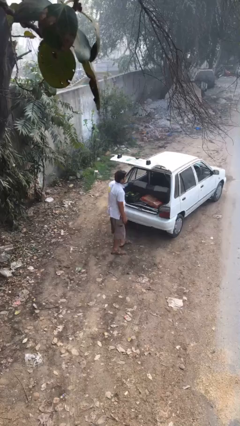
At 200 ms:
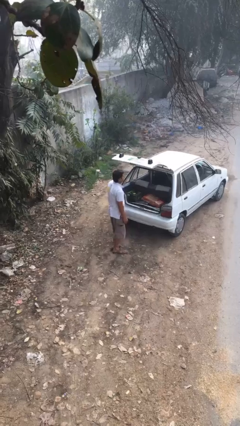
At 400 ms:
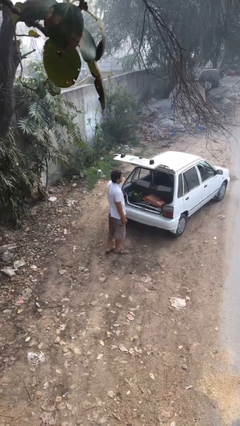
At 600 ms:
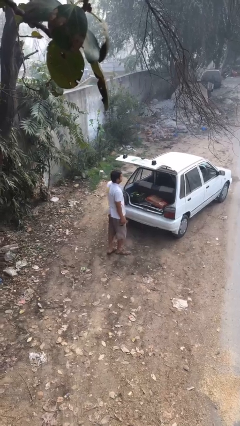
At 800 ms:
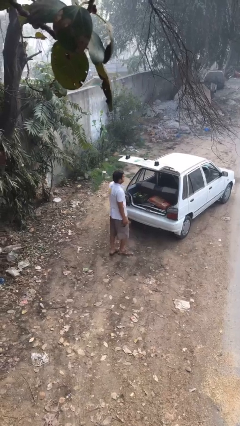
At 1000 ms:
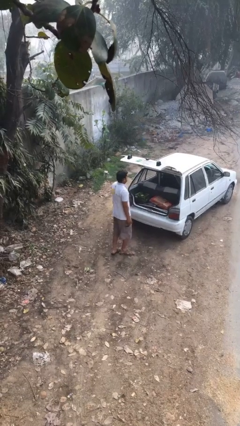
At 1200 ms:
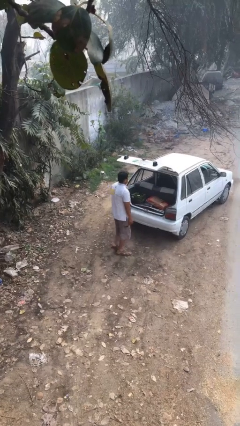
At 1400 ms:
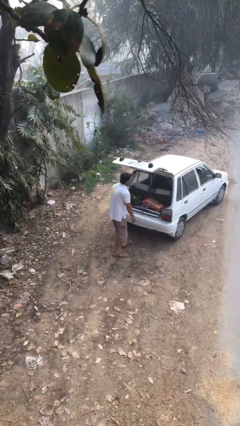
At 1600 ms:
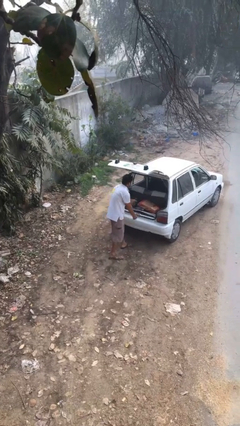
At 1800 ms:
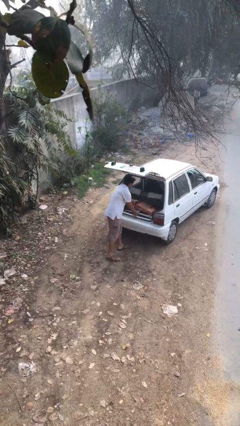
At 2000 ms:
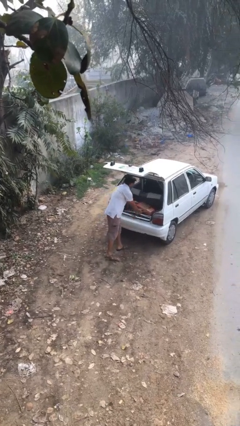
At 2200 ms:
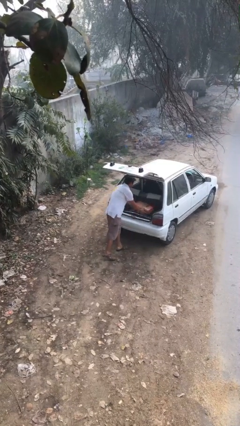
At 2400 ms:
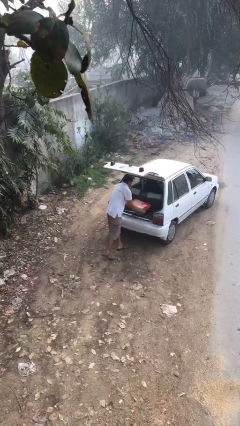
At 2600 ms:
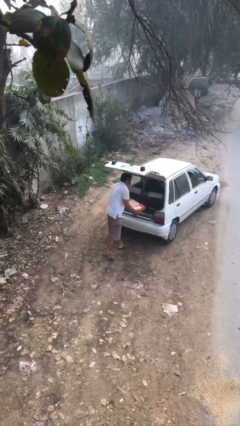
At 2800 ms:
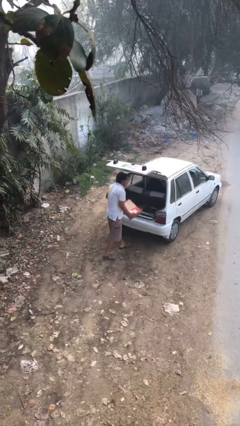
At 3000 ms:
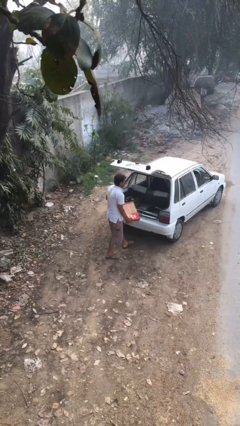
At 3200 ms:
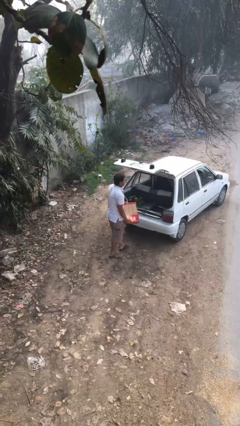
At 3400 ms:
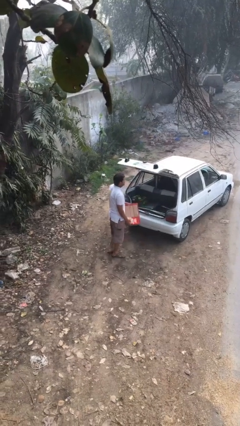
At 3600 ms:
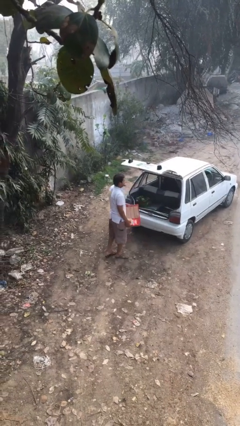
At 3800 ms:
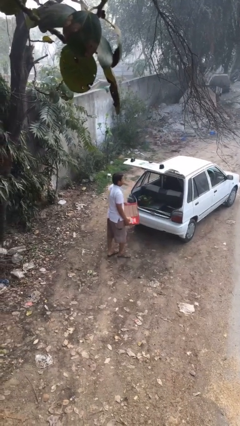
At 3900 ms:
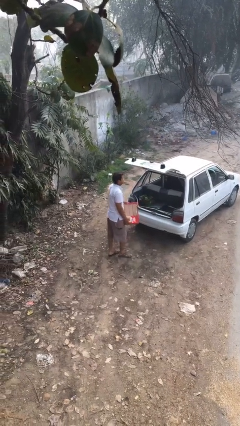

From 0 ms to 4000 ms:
person unloads car

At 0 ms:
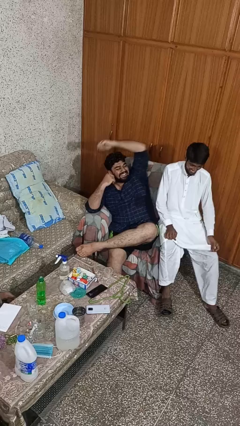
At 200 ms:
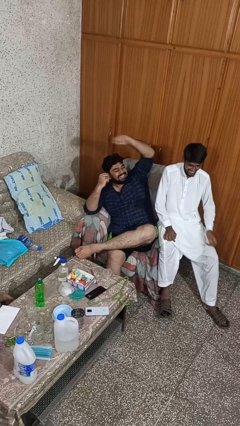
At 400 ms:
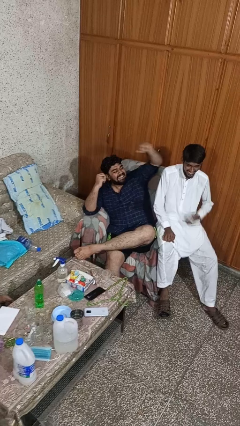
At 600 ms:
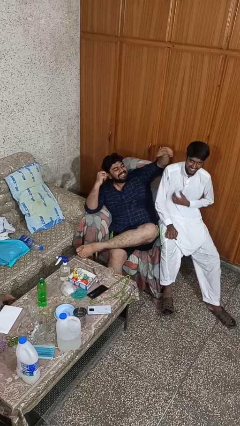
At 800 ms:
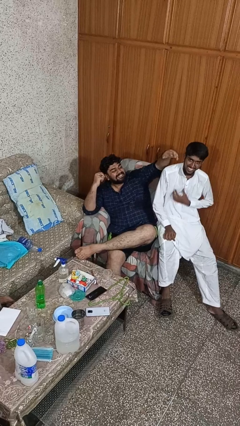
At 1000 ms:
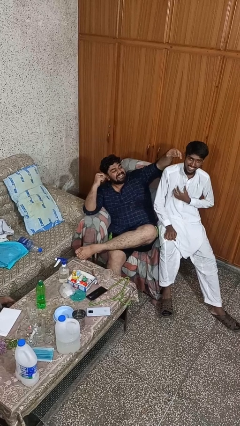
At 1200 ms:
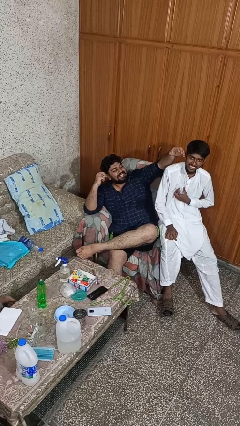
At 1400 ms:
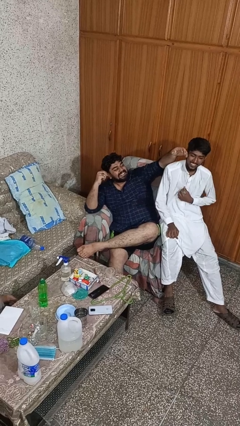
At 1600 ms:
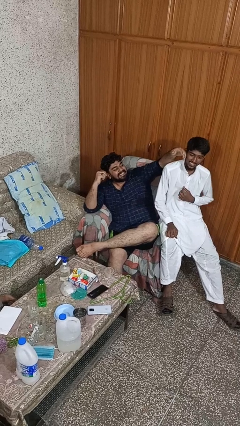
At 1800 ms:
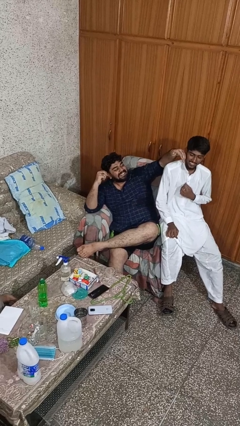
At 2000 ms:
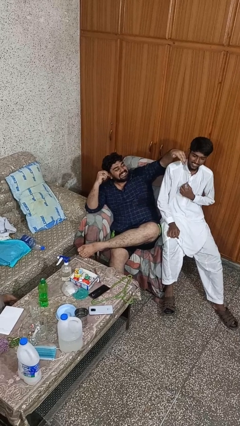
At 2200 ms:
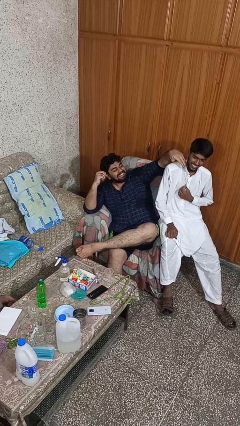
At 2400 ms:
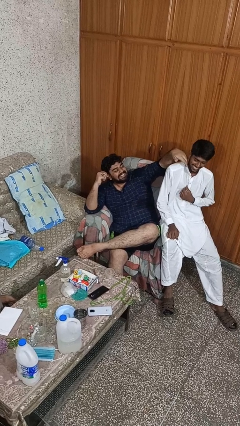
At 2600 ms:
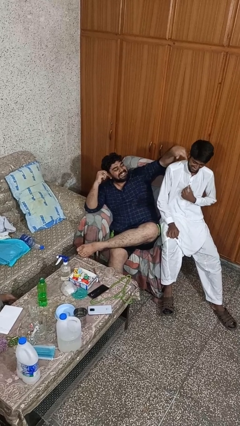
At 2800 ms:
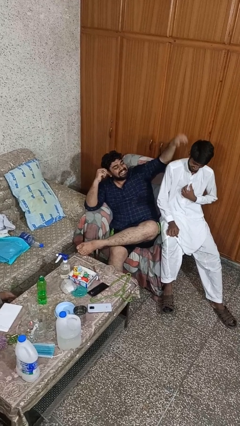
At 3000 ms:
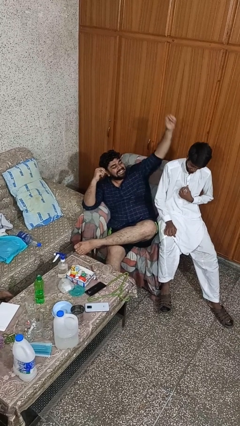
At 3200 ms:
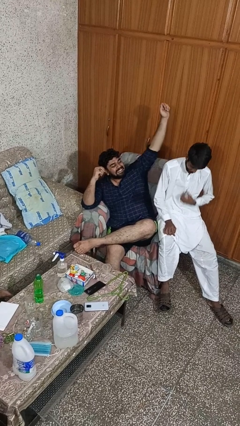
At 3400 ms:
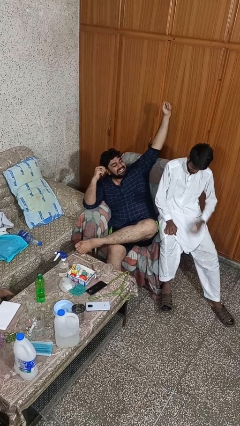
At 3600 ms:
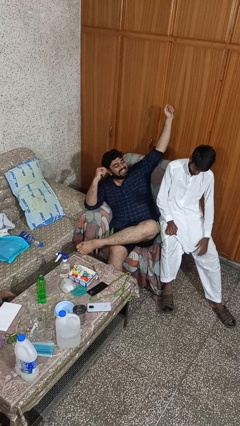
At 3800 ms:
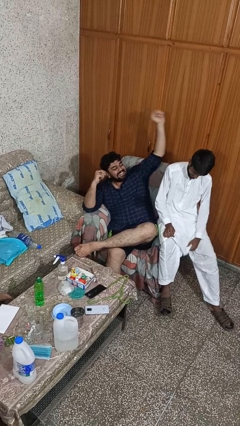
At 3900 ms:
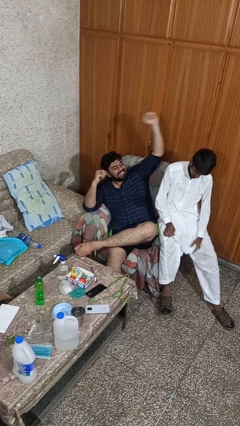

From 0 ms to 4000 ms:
person touches face of person

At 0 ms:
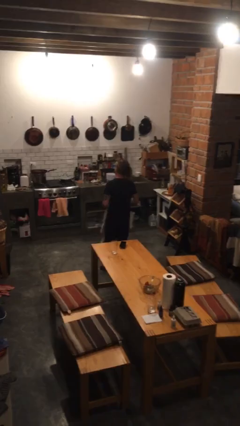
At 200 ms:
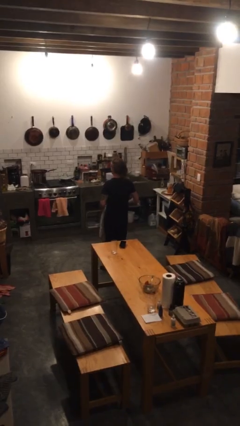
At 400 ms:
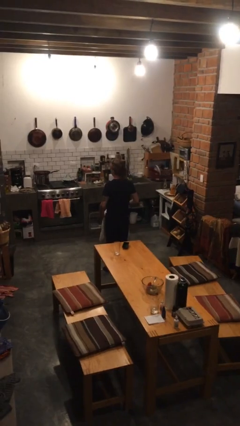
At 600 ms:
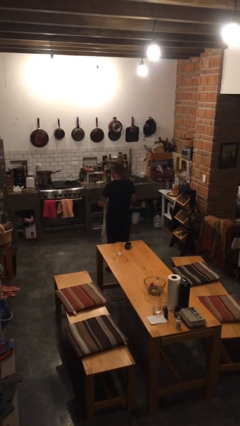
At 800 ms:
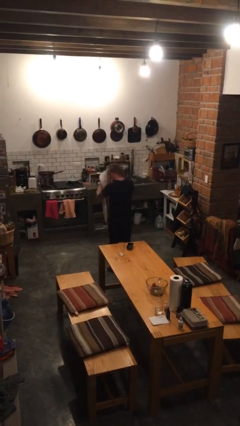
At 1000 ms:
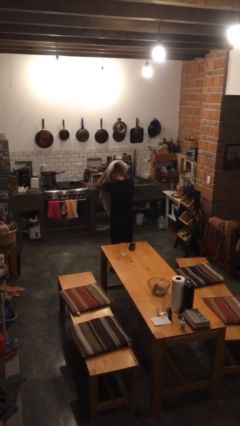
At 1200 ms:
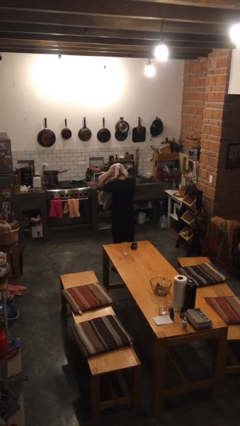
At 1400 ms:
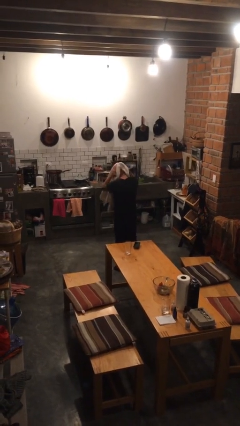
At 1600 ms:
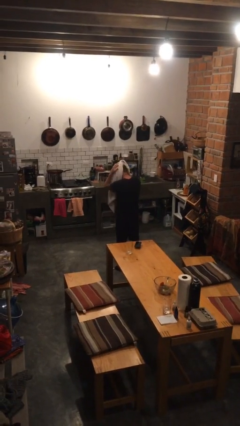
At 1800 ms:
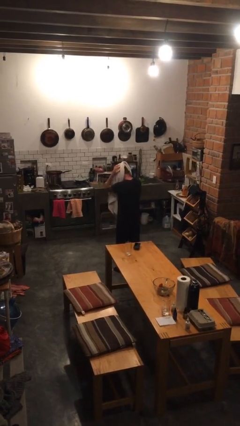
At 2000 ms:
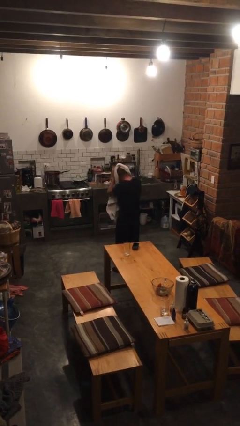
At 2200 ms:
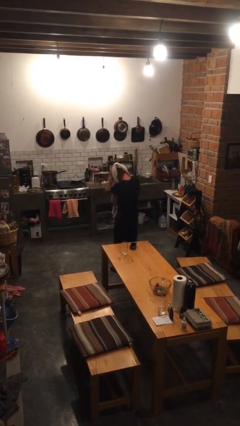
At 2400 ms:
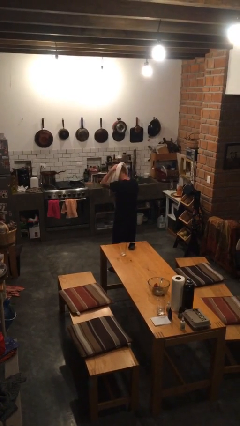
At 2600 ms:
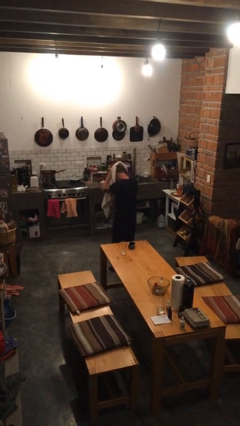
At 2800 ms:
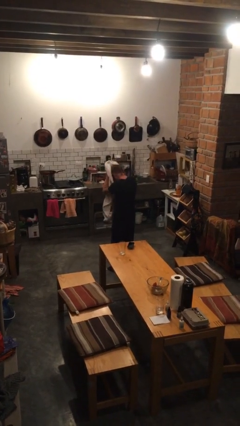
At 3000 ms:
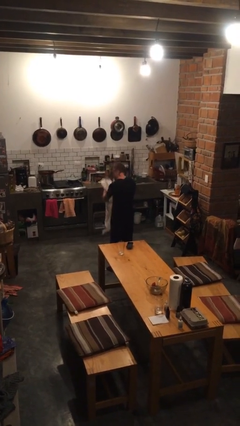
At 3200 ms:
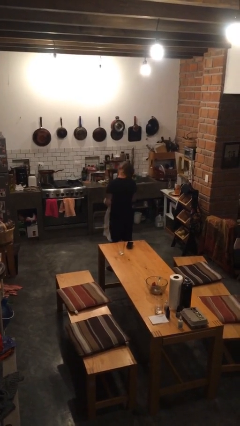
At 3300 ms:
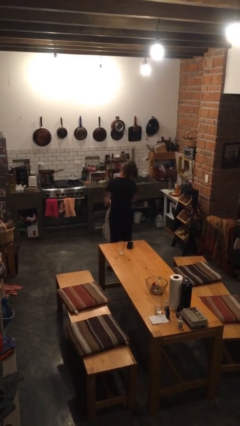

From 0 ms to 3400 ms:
person dries hair with towel

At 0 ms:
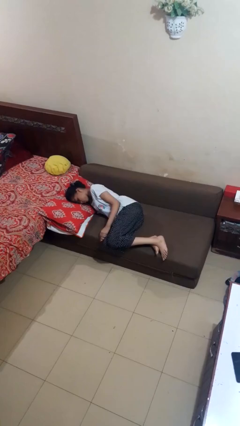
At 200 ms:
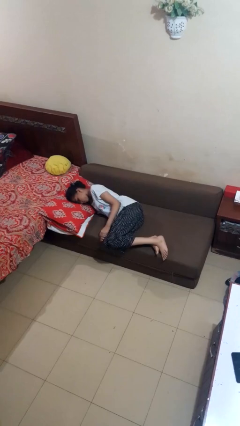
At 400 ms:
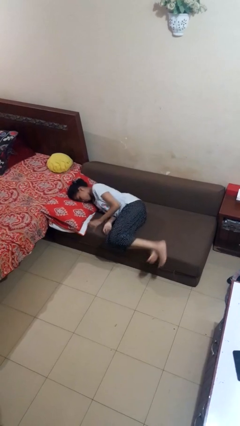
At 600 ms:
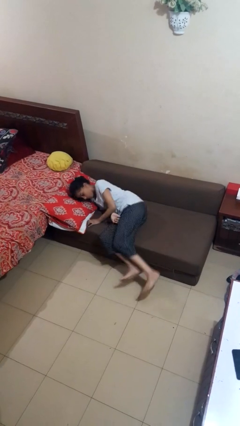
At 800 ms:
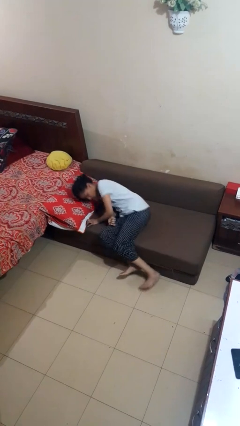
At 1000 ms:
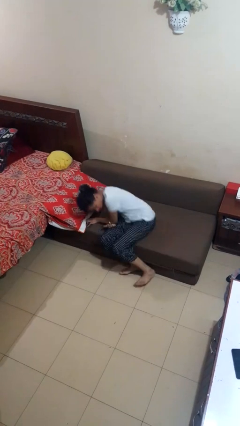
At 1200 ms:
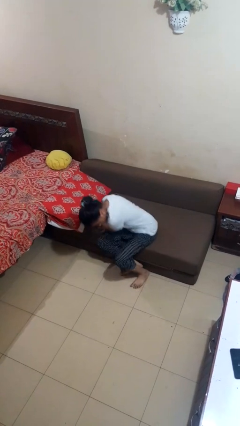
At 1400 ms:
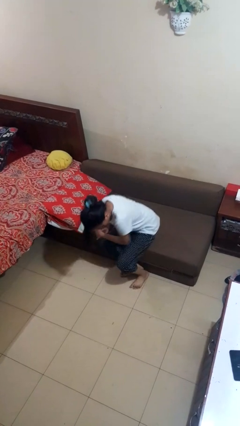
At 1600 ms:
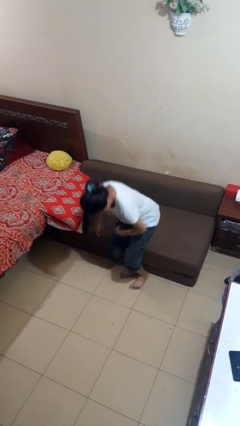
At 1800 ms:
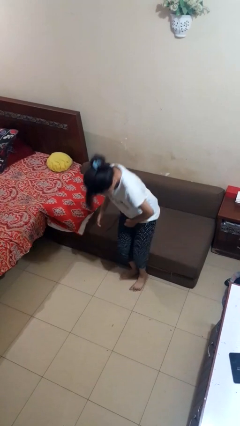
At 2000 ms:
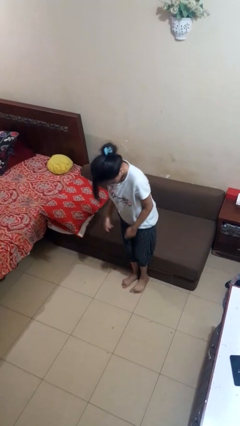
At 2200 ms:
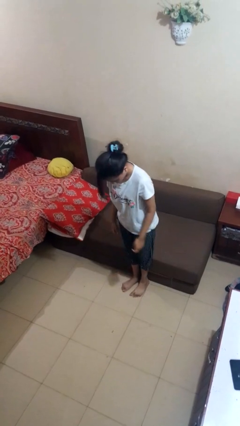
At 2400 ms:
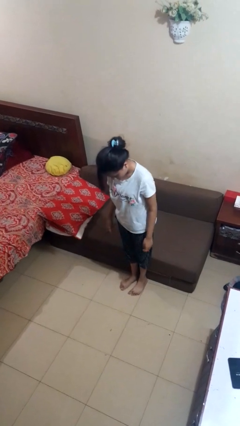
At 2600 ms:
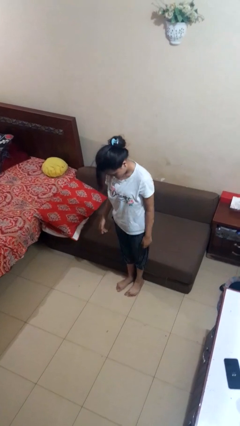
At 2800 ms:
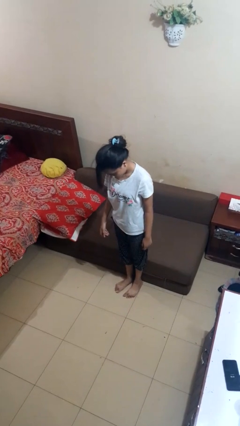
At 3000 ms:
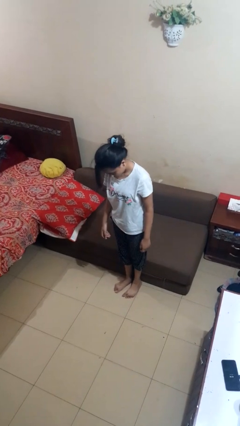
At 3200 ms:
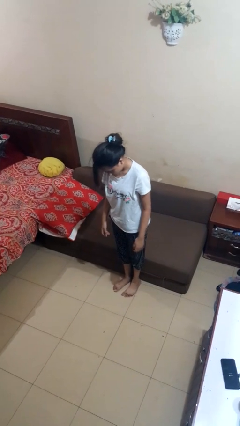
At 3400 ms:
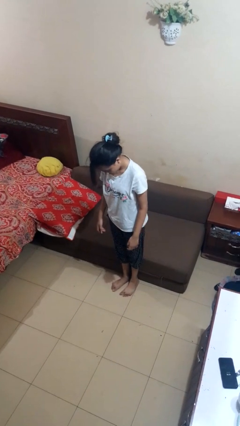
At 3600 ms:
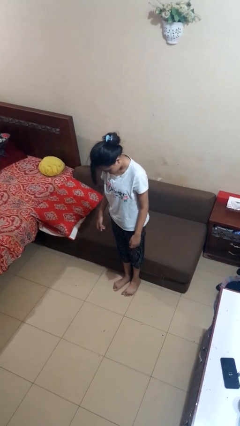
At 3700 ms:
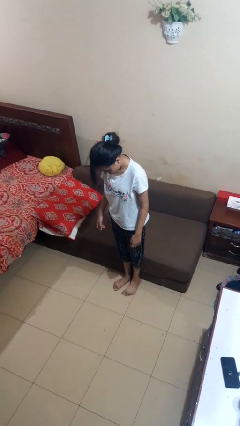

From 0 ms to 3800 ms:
person stands up

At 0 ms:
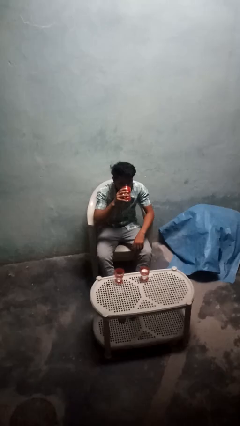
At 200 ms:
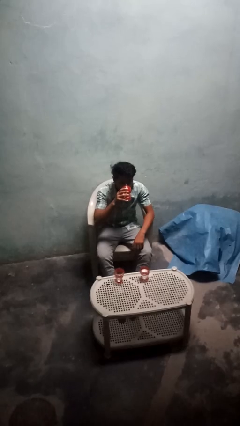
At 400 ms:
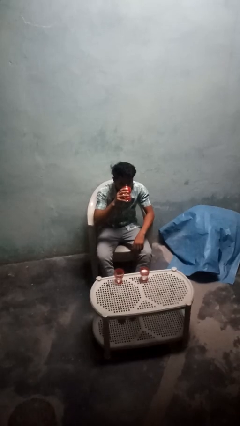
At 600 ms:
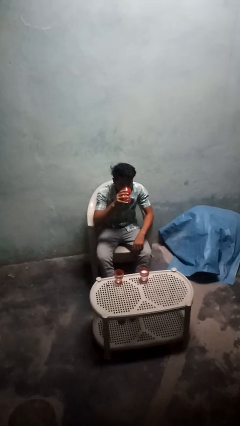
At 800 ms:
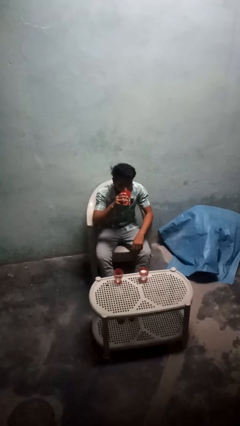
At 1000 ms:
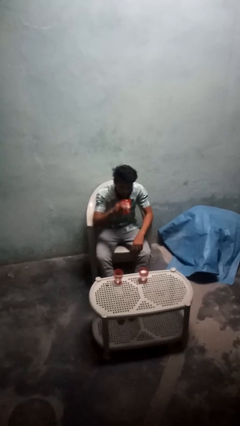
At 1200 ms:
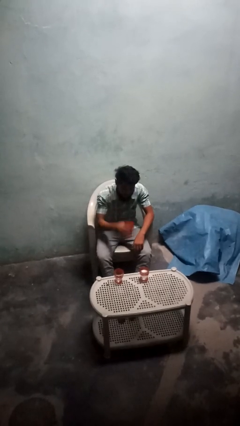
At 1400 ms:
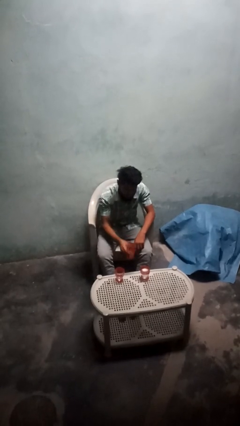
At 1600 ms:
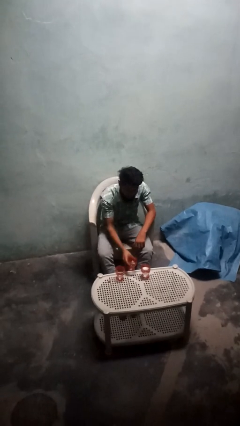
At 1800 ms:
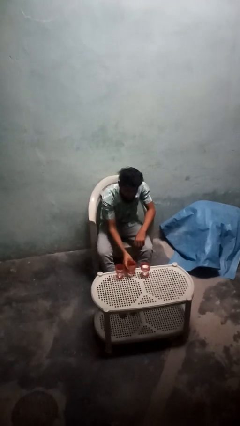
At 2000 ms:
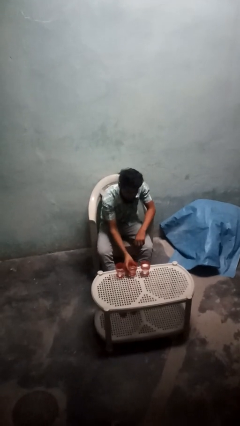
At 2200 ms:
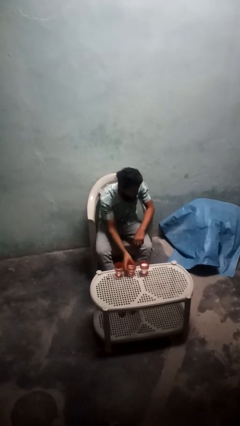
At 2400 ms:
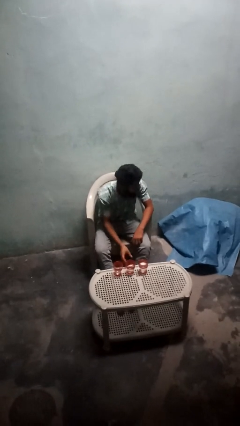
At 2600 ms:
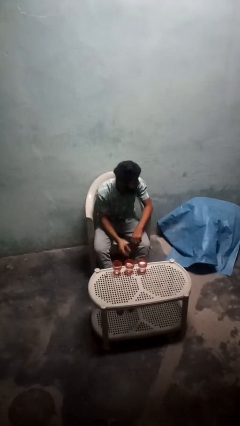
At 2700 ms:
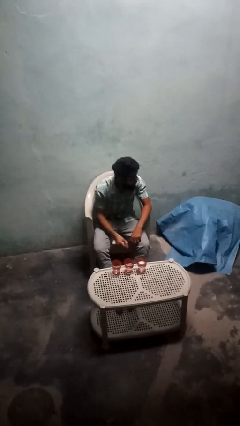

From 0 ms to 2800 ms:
person puts down object on table
